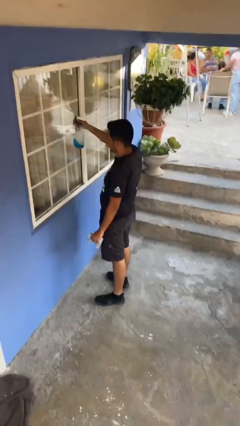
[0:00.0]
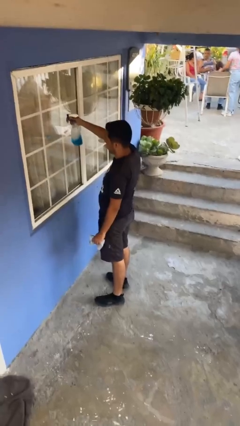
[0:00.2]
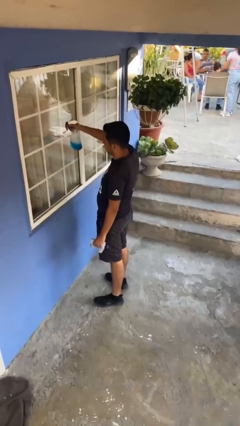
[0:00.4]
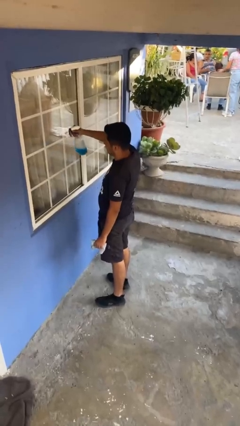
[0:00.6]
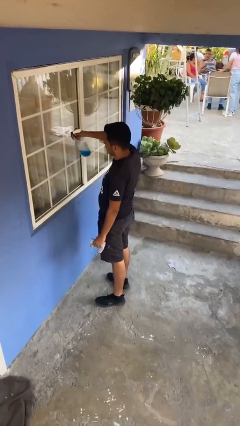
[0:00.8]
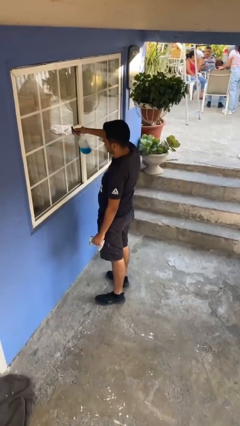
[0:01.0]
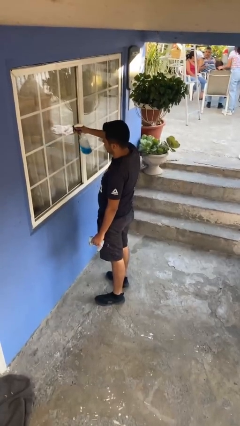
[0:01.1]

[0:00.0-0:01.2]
person sprays from bottle

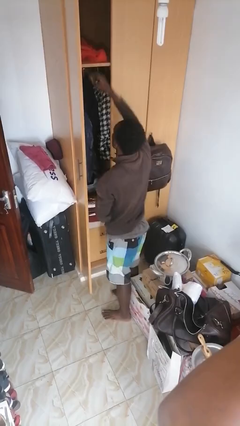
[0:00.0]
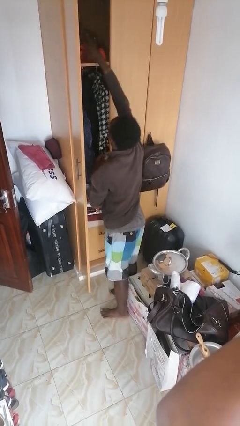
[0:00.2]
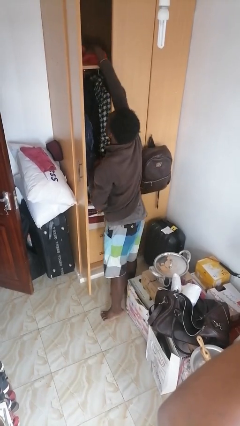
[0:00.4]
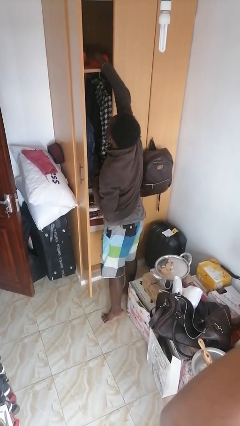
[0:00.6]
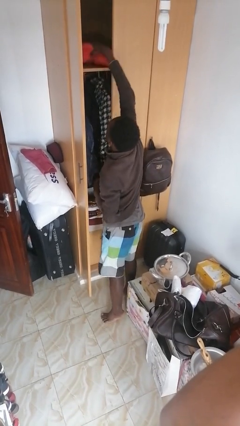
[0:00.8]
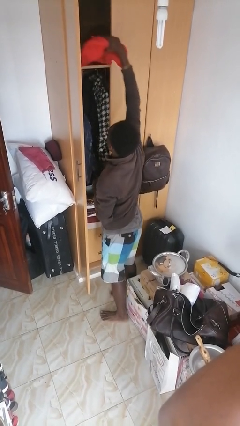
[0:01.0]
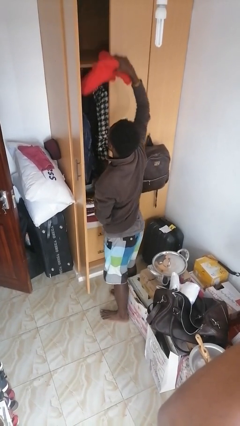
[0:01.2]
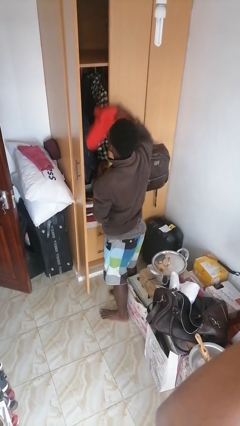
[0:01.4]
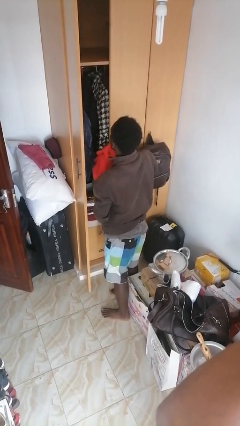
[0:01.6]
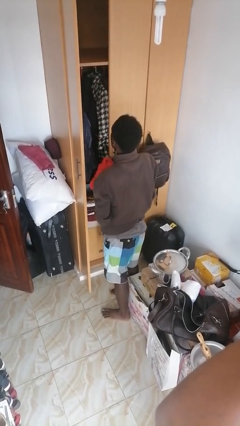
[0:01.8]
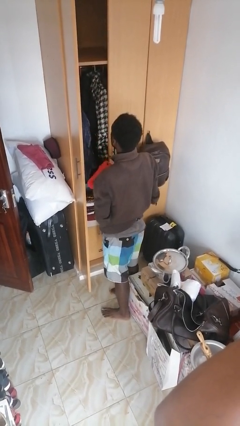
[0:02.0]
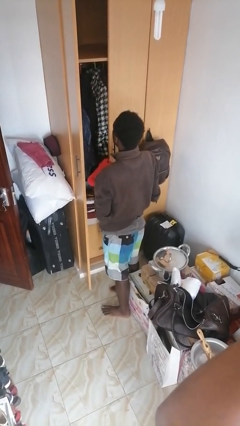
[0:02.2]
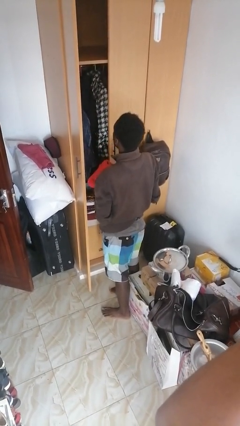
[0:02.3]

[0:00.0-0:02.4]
person picks up object from shelf

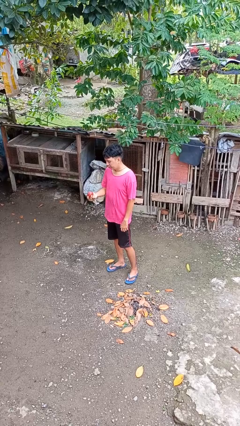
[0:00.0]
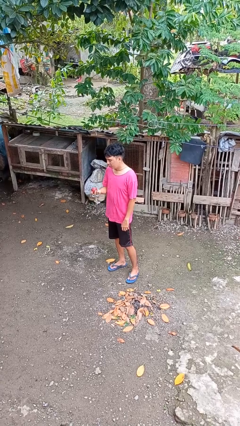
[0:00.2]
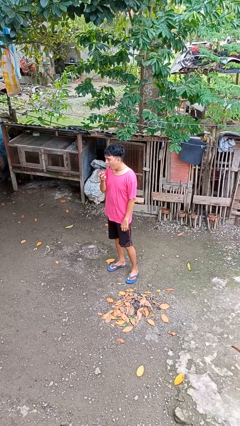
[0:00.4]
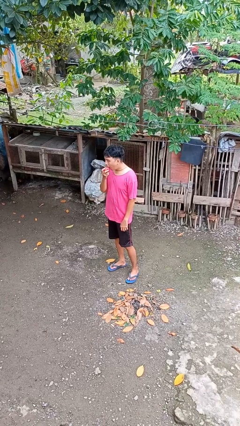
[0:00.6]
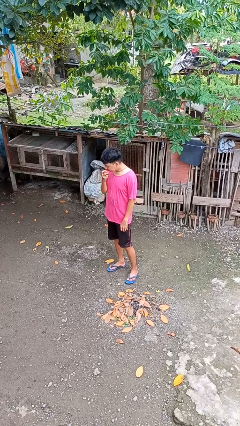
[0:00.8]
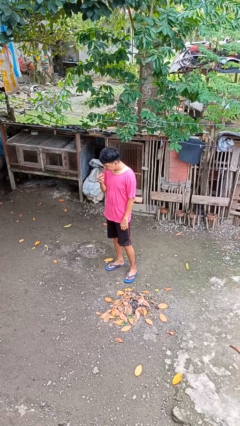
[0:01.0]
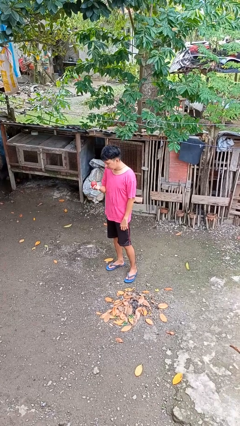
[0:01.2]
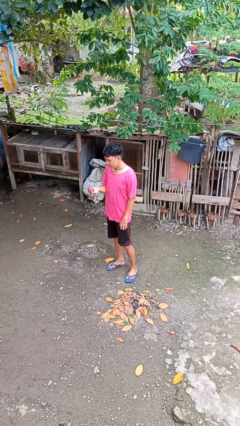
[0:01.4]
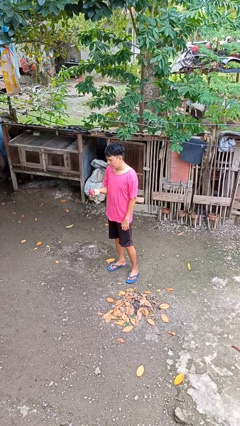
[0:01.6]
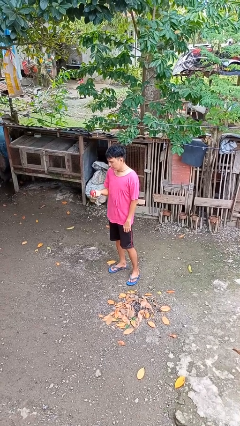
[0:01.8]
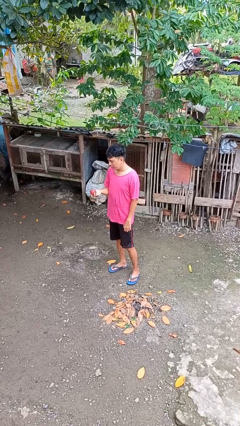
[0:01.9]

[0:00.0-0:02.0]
person eats apple

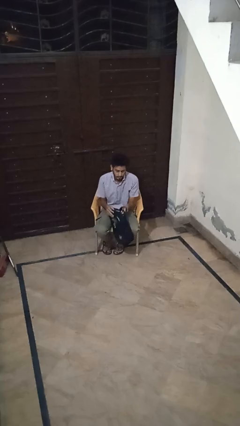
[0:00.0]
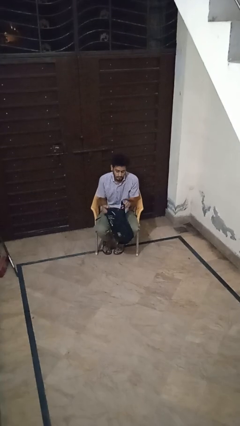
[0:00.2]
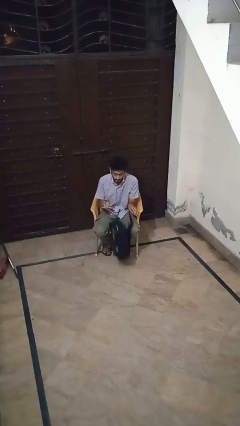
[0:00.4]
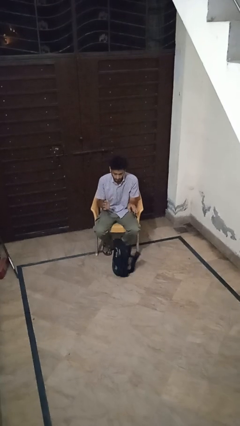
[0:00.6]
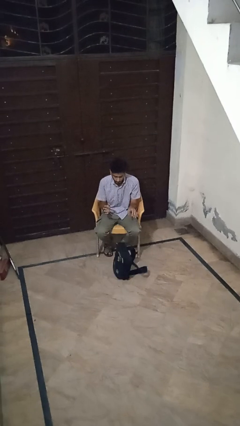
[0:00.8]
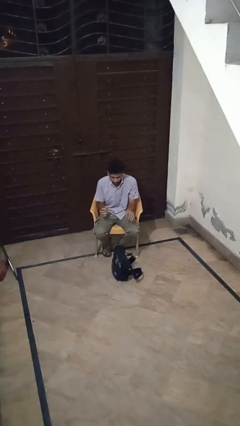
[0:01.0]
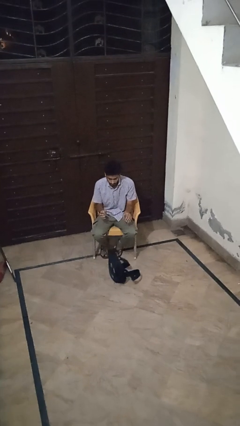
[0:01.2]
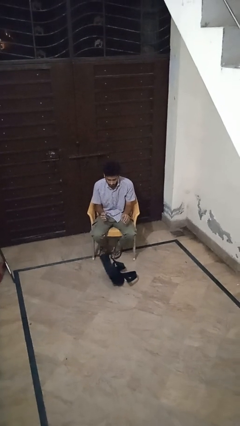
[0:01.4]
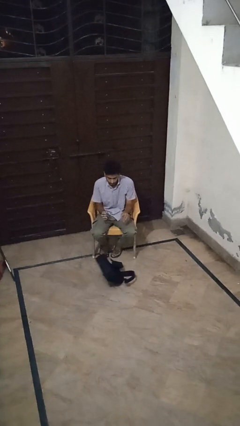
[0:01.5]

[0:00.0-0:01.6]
person drops object

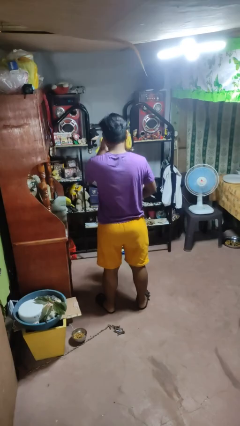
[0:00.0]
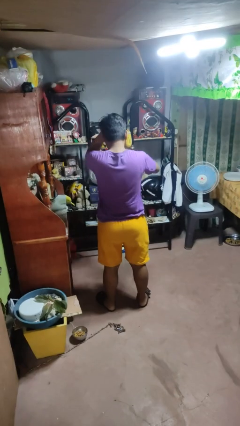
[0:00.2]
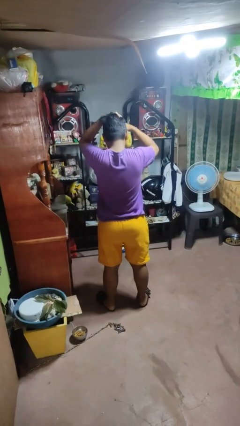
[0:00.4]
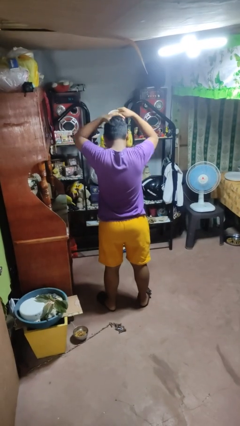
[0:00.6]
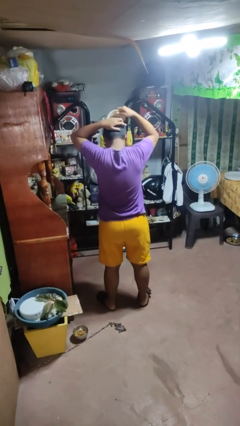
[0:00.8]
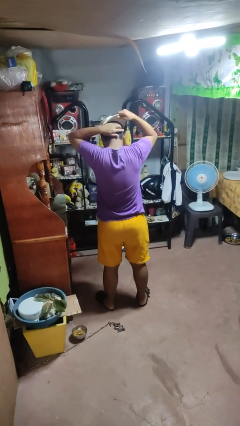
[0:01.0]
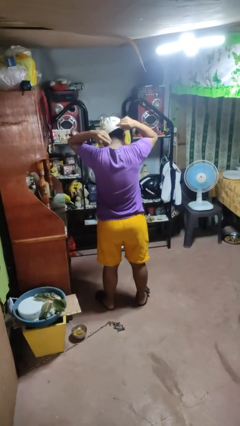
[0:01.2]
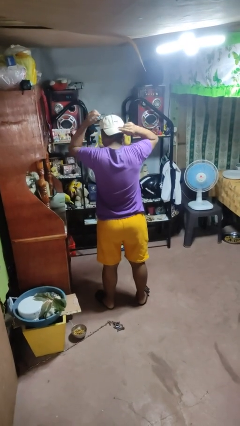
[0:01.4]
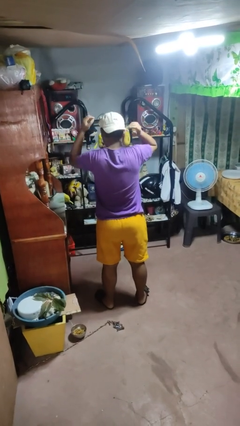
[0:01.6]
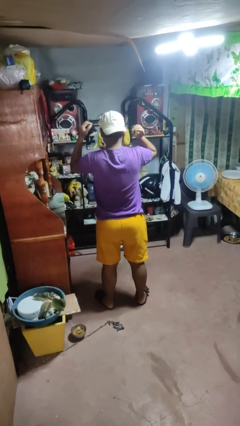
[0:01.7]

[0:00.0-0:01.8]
person puts on hat

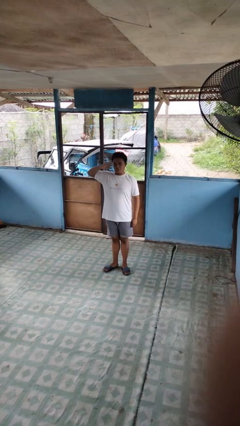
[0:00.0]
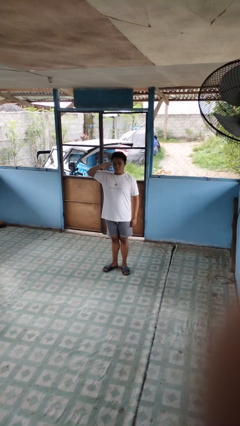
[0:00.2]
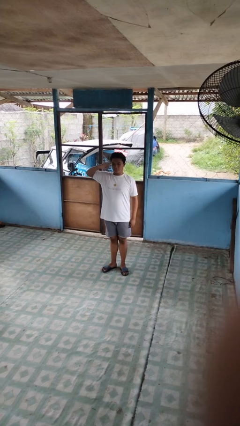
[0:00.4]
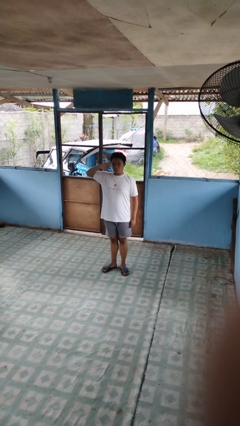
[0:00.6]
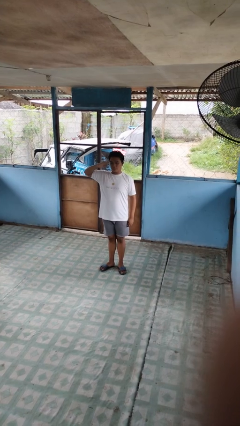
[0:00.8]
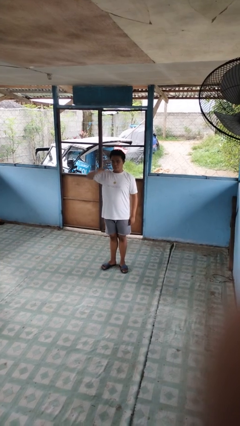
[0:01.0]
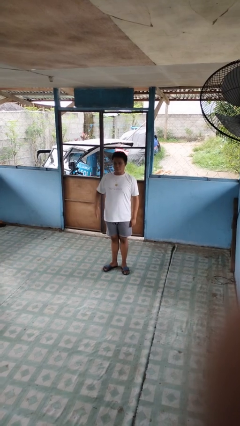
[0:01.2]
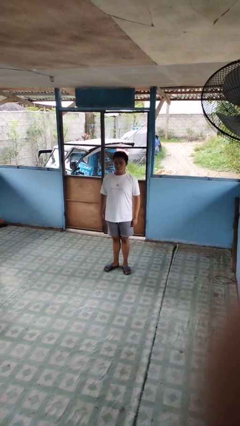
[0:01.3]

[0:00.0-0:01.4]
person salutes

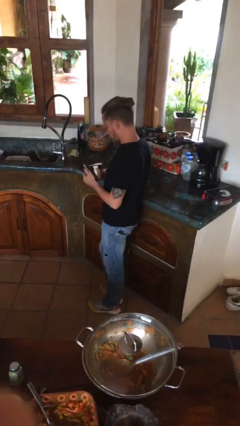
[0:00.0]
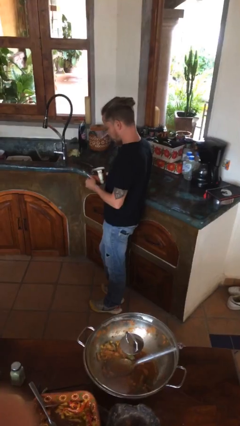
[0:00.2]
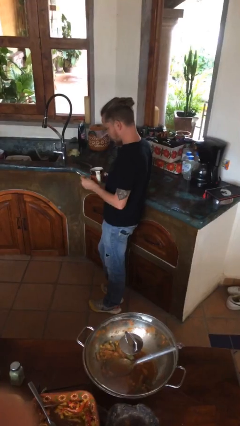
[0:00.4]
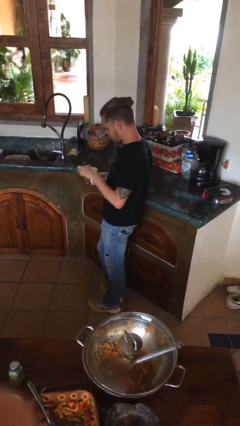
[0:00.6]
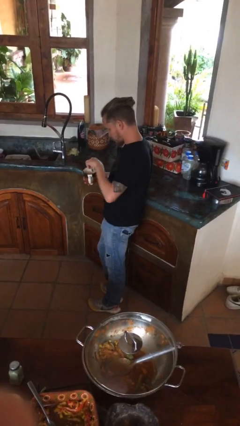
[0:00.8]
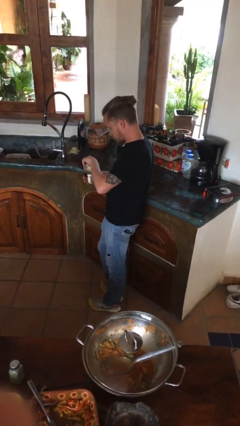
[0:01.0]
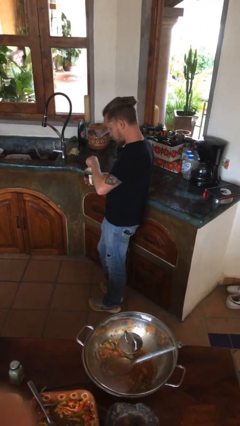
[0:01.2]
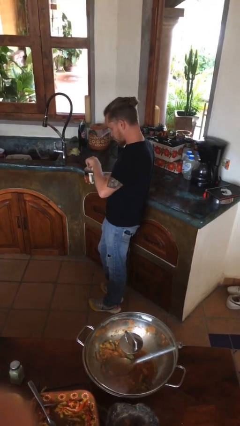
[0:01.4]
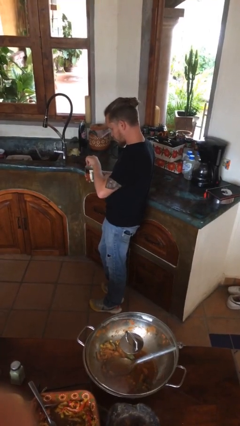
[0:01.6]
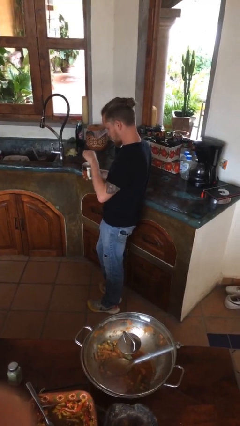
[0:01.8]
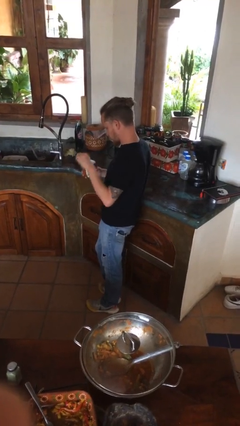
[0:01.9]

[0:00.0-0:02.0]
person stirs mug

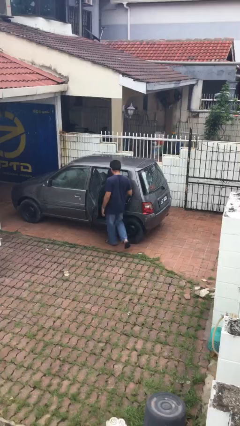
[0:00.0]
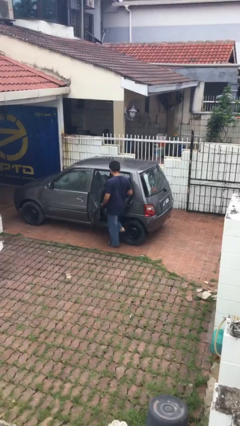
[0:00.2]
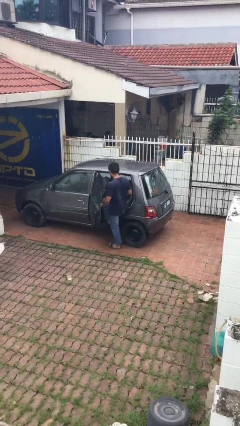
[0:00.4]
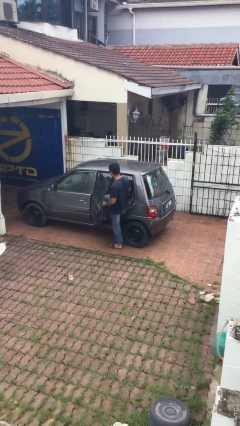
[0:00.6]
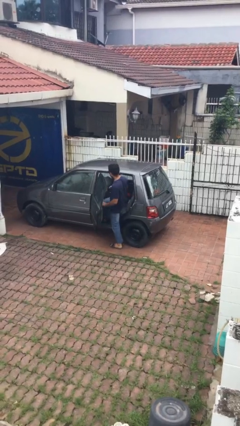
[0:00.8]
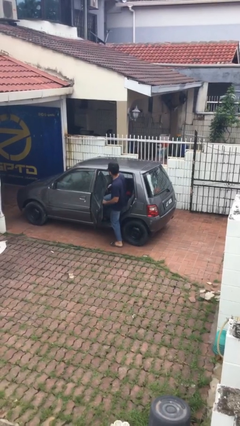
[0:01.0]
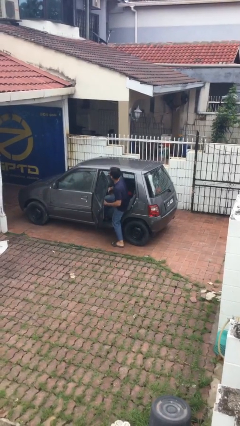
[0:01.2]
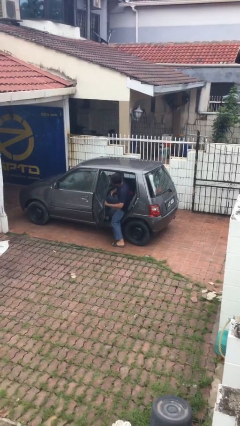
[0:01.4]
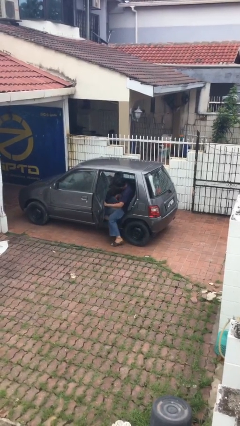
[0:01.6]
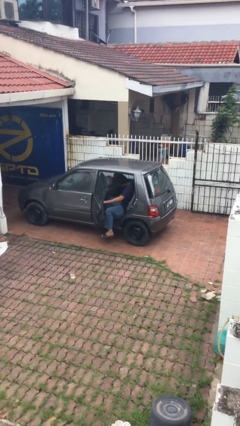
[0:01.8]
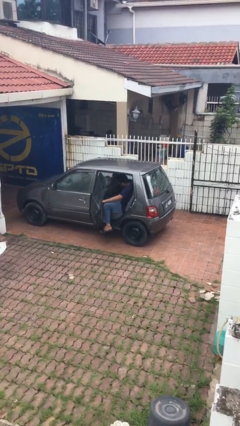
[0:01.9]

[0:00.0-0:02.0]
person enters car

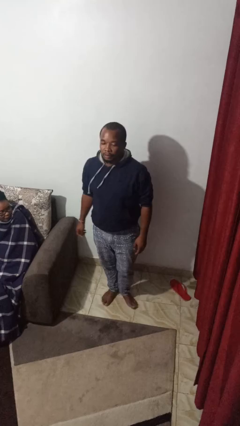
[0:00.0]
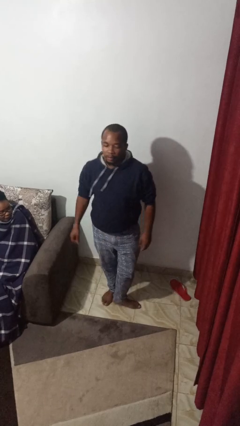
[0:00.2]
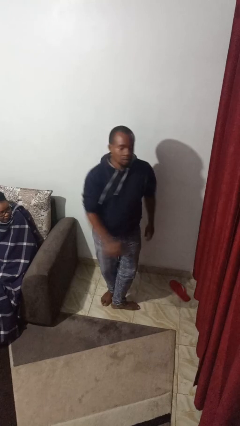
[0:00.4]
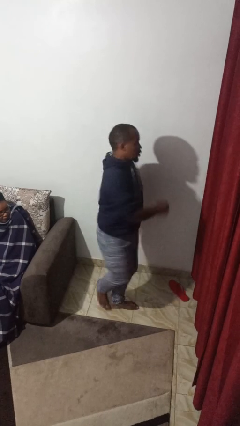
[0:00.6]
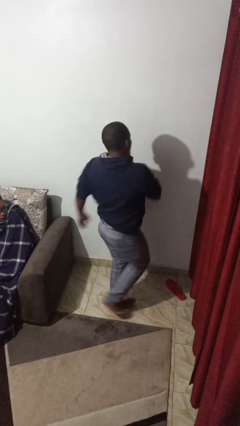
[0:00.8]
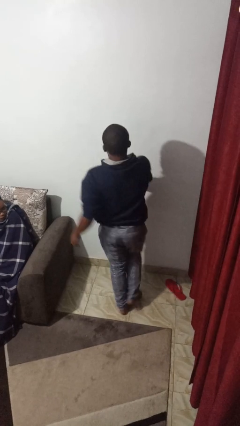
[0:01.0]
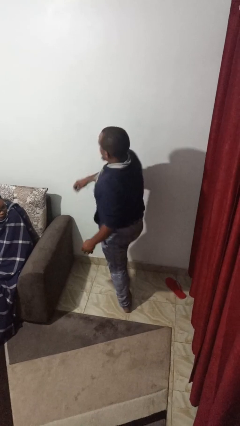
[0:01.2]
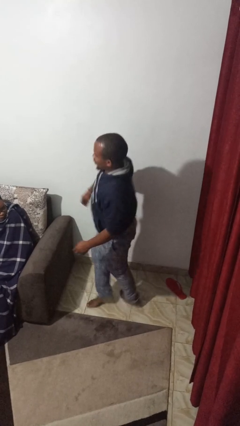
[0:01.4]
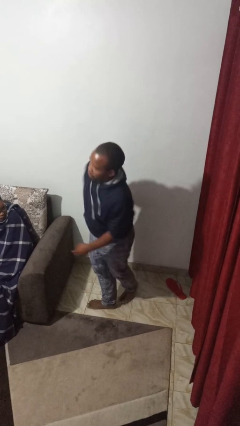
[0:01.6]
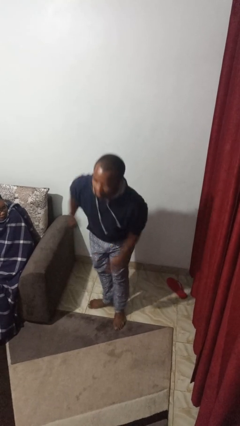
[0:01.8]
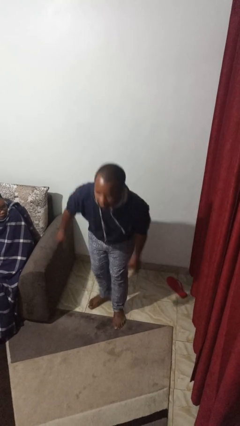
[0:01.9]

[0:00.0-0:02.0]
person twirls

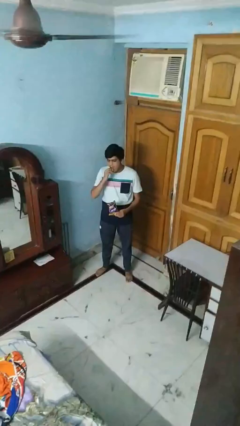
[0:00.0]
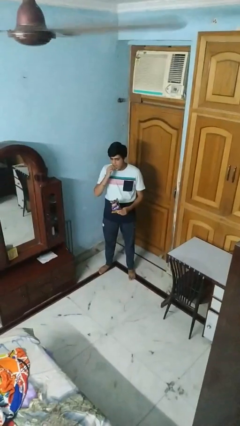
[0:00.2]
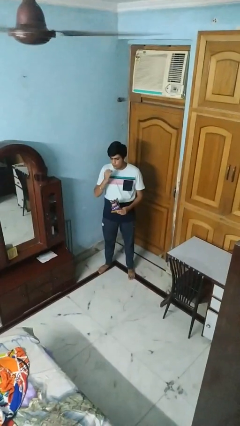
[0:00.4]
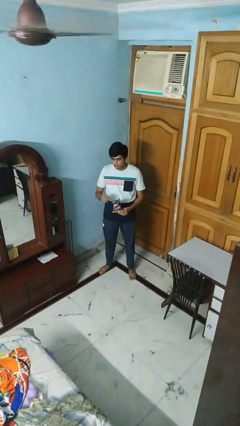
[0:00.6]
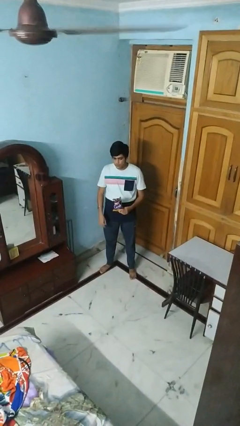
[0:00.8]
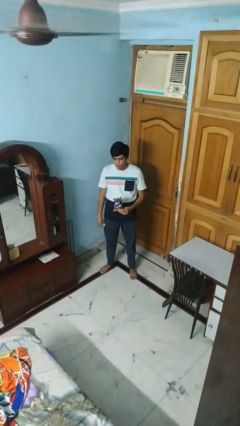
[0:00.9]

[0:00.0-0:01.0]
person eats snack from bag
